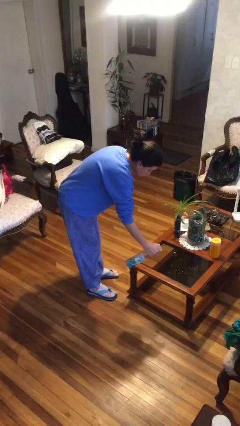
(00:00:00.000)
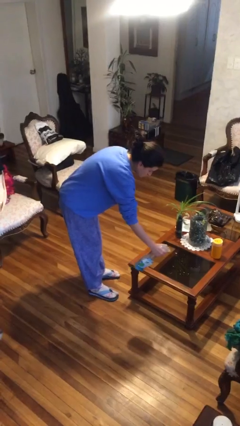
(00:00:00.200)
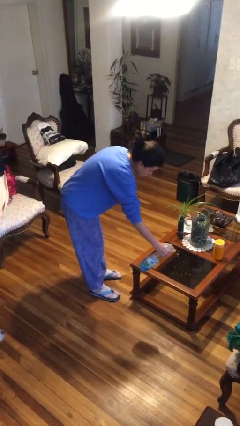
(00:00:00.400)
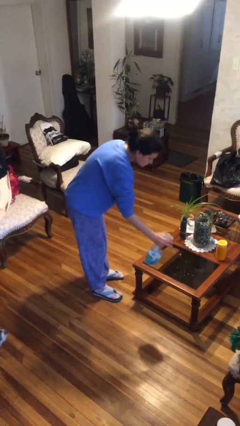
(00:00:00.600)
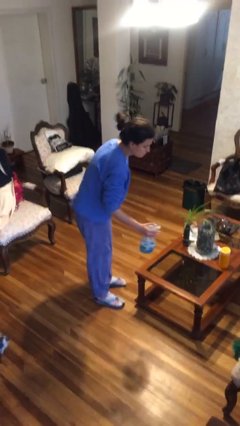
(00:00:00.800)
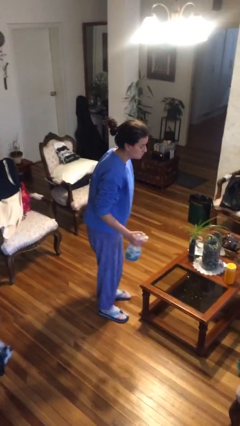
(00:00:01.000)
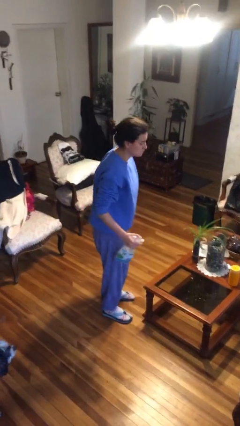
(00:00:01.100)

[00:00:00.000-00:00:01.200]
person sprays from bottle

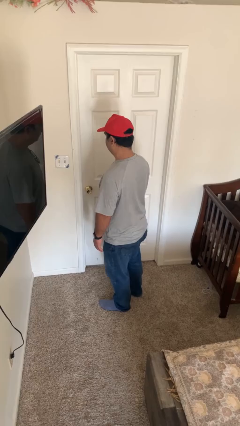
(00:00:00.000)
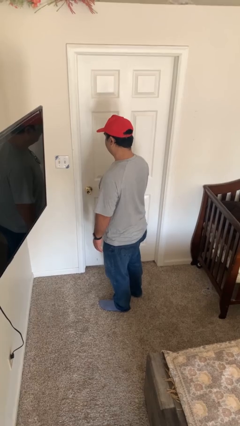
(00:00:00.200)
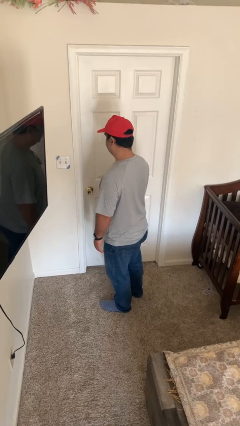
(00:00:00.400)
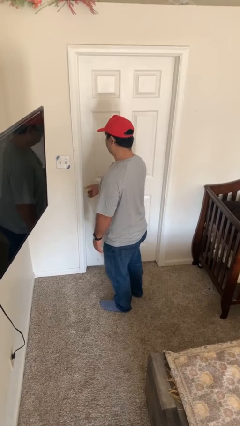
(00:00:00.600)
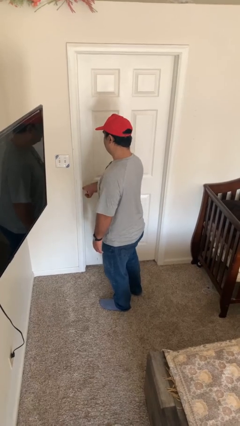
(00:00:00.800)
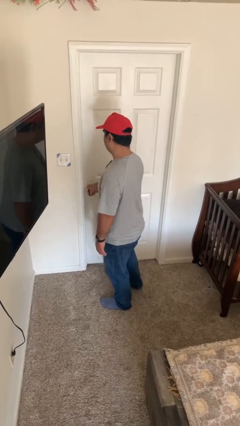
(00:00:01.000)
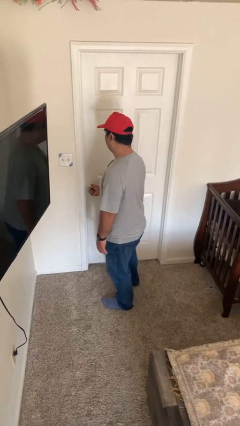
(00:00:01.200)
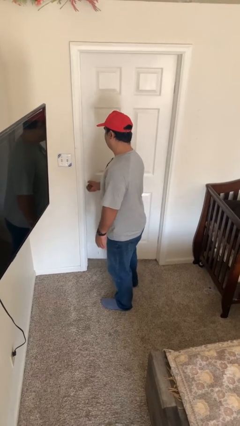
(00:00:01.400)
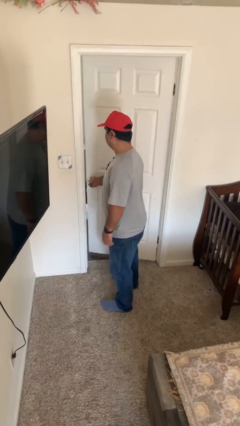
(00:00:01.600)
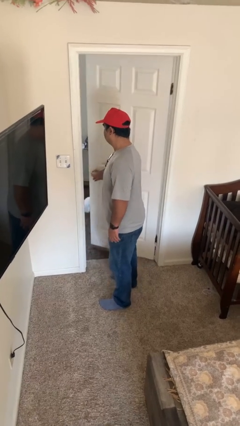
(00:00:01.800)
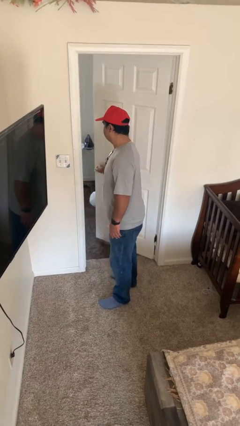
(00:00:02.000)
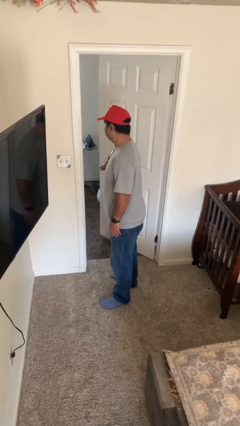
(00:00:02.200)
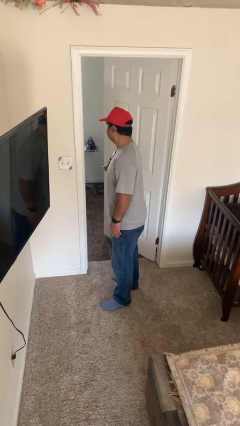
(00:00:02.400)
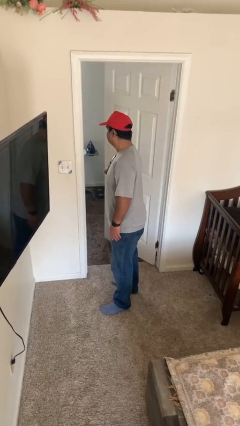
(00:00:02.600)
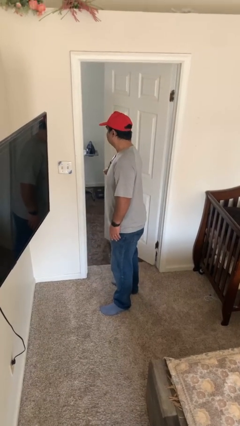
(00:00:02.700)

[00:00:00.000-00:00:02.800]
person opens facility door

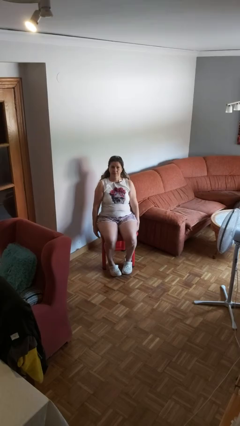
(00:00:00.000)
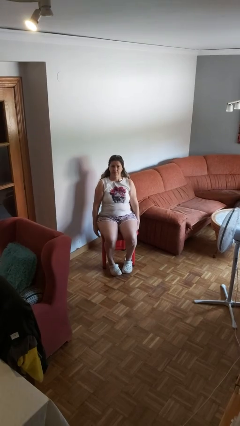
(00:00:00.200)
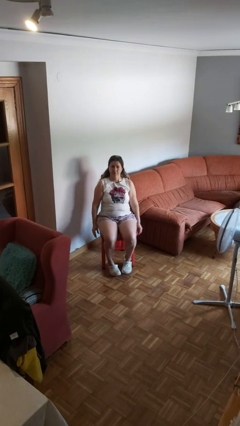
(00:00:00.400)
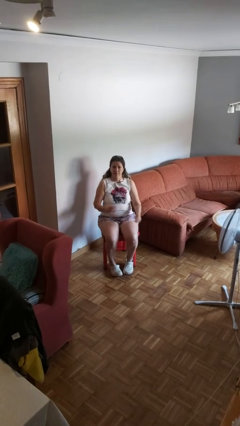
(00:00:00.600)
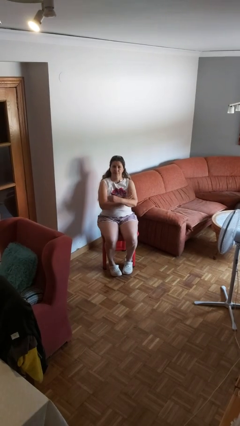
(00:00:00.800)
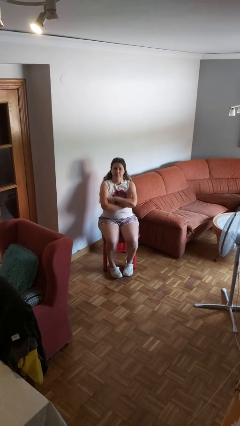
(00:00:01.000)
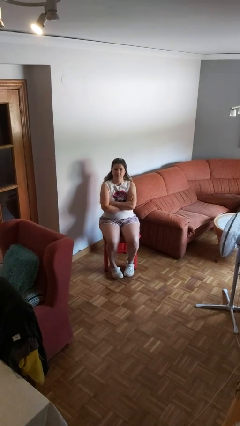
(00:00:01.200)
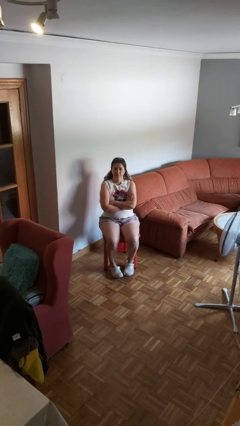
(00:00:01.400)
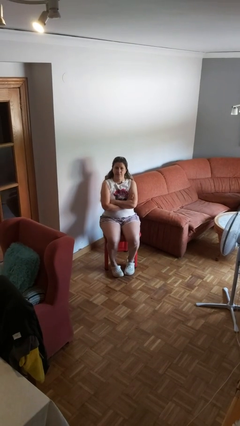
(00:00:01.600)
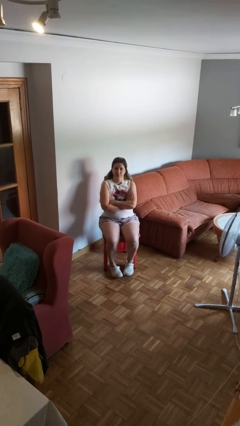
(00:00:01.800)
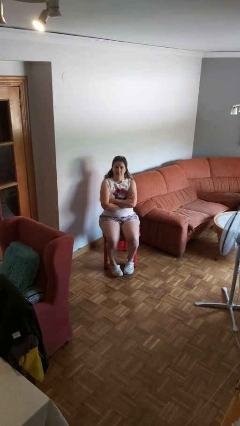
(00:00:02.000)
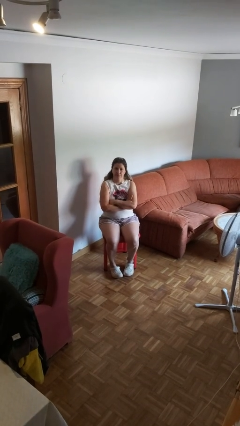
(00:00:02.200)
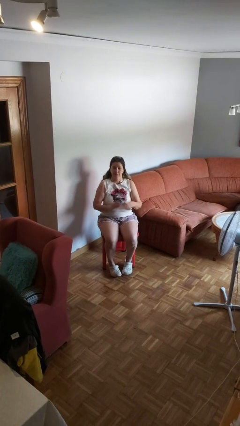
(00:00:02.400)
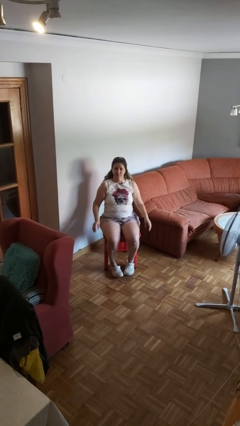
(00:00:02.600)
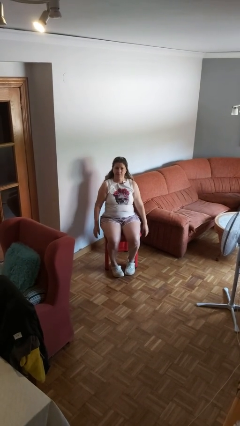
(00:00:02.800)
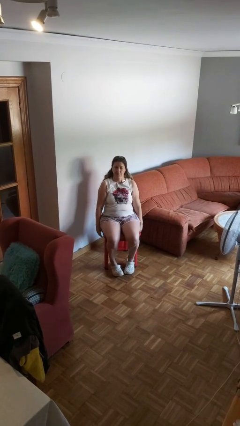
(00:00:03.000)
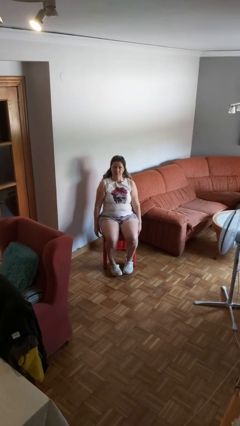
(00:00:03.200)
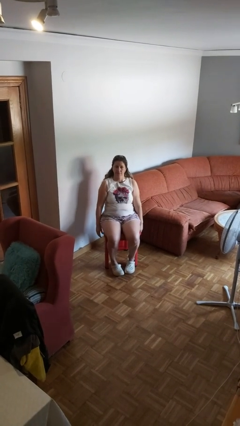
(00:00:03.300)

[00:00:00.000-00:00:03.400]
person crosses arms

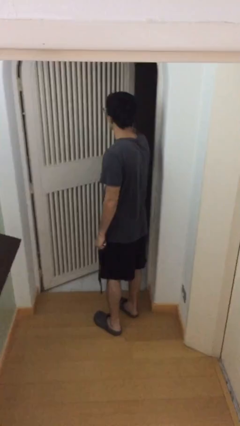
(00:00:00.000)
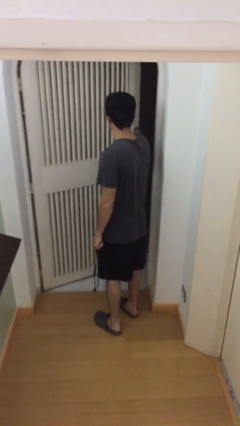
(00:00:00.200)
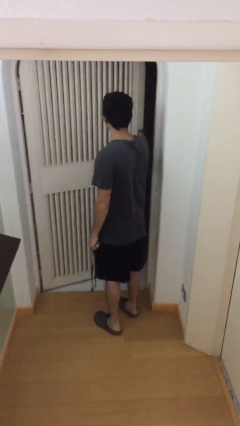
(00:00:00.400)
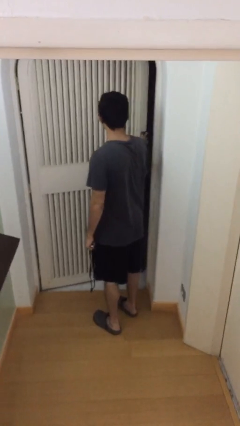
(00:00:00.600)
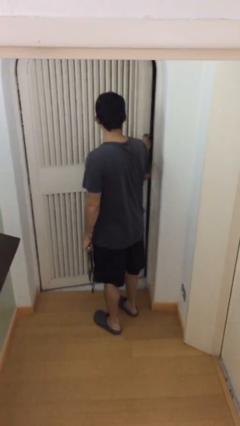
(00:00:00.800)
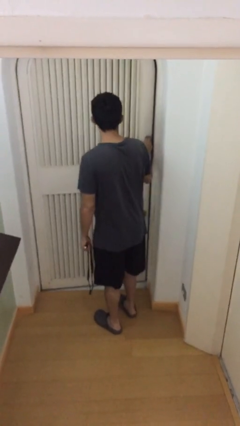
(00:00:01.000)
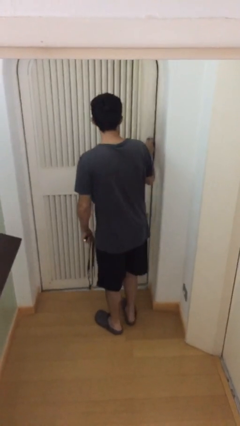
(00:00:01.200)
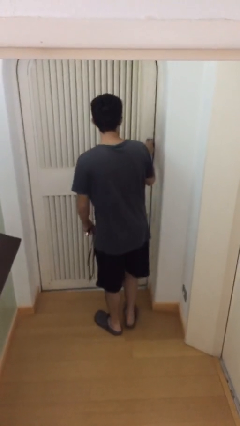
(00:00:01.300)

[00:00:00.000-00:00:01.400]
person closes facility door

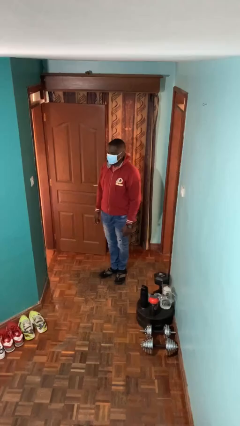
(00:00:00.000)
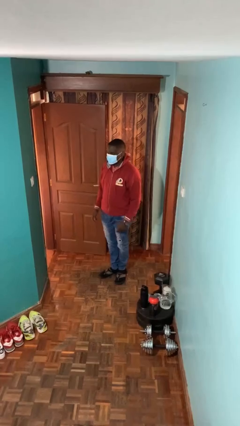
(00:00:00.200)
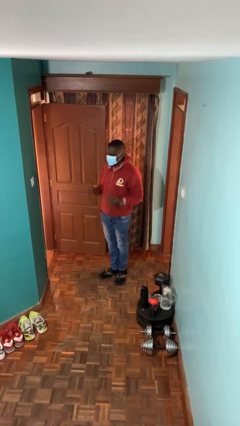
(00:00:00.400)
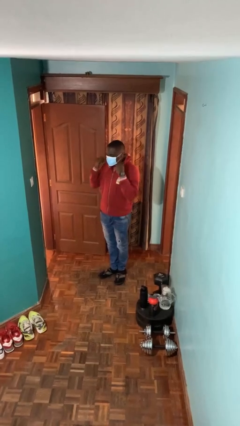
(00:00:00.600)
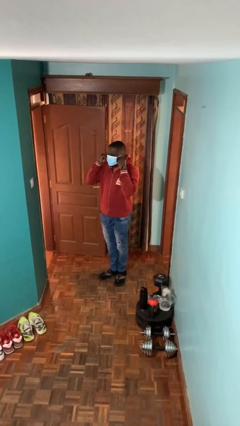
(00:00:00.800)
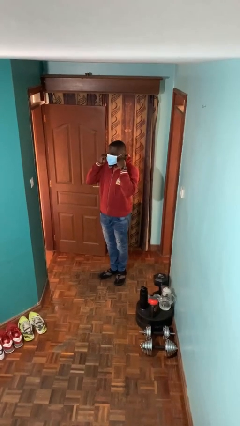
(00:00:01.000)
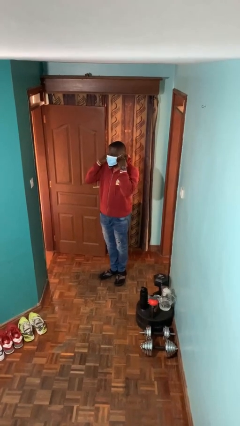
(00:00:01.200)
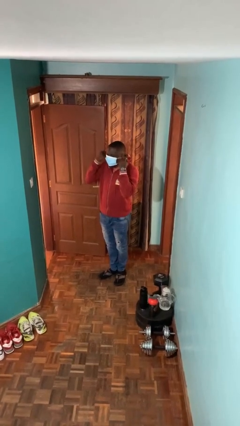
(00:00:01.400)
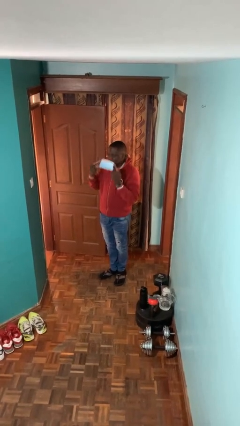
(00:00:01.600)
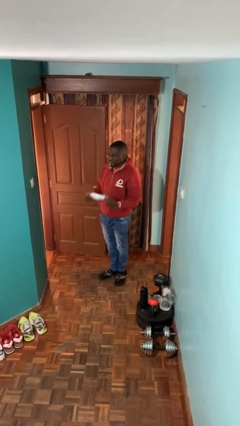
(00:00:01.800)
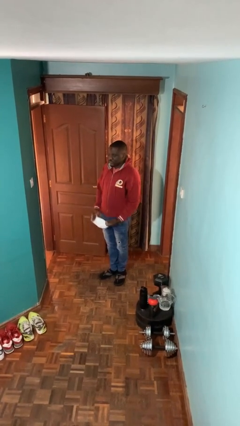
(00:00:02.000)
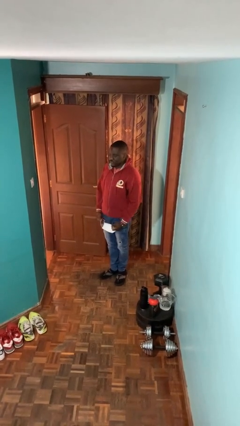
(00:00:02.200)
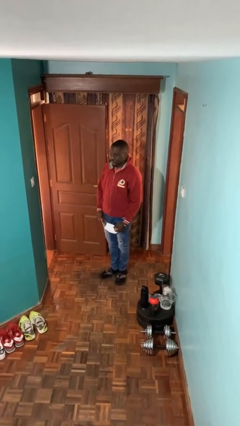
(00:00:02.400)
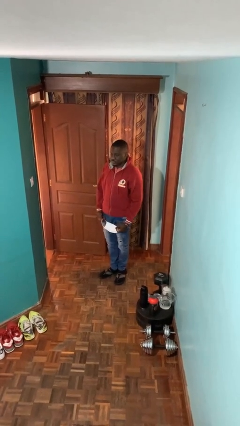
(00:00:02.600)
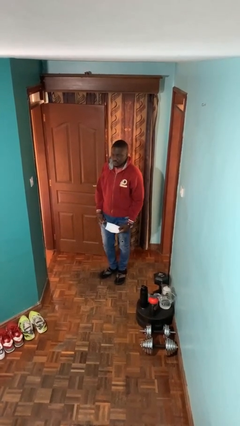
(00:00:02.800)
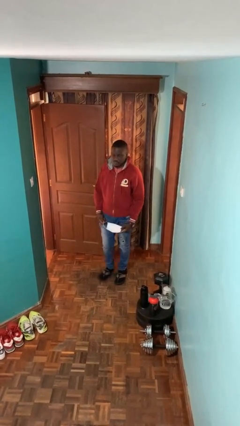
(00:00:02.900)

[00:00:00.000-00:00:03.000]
person takes off facemask

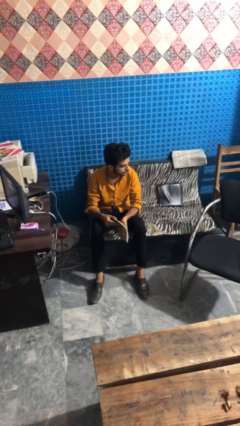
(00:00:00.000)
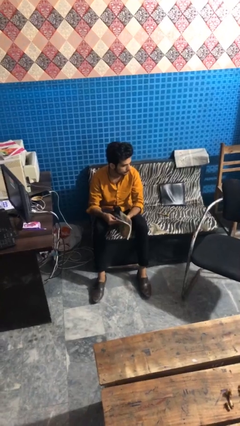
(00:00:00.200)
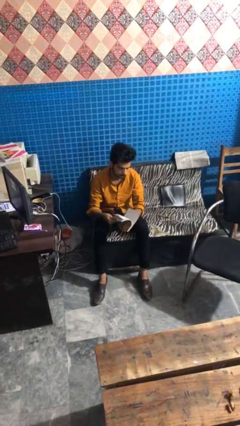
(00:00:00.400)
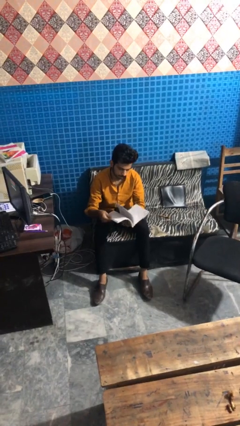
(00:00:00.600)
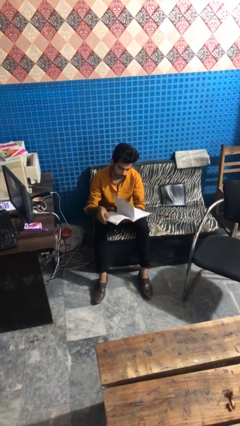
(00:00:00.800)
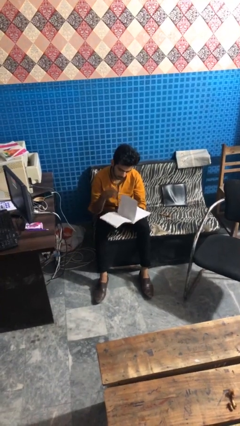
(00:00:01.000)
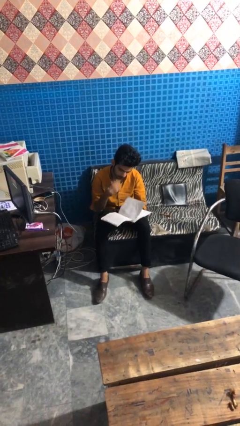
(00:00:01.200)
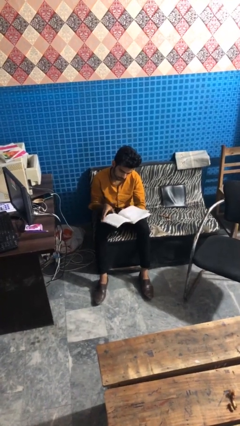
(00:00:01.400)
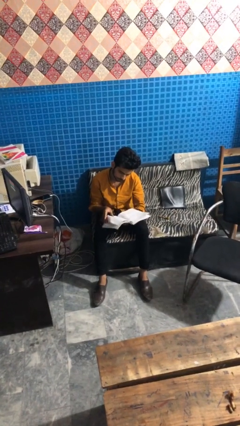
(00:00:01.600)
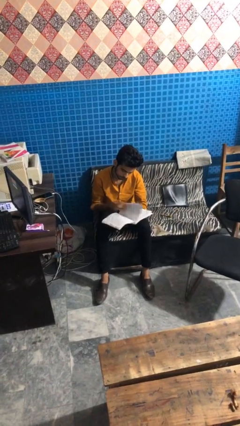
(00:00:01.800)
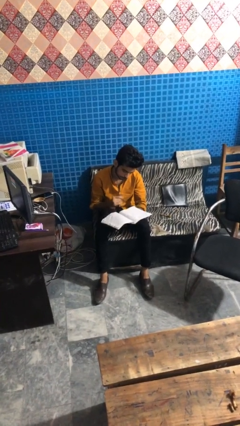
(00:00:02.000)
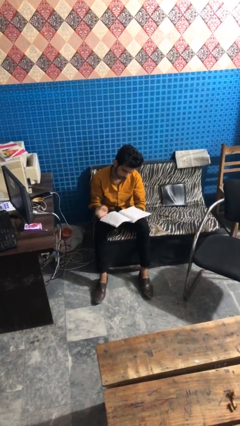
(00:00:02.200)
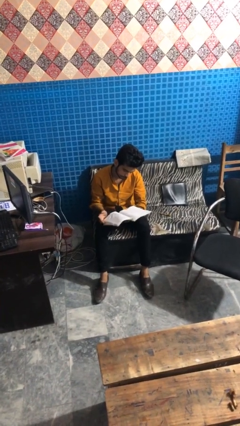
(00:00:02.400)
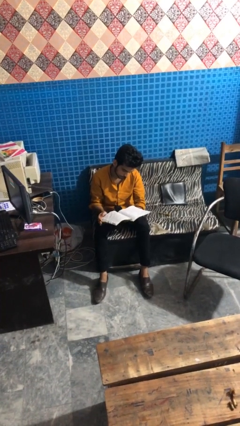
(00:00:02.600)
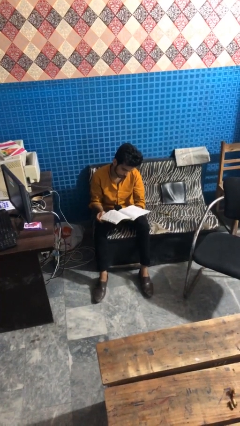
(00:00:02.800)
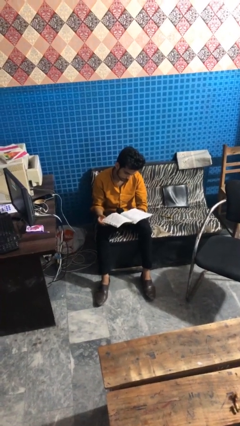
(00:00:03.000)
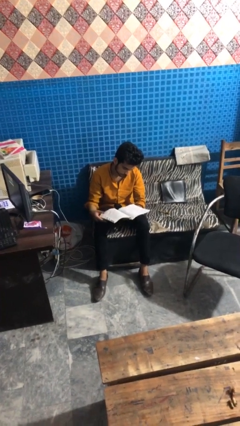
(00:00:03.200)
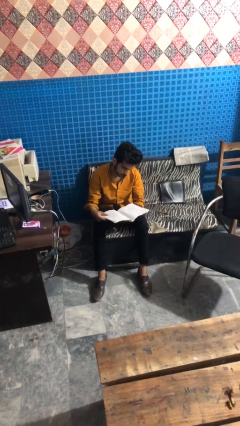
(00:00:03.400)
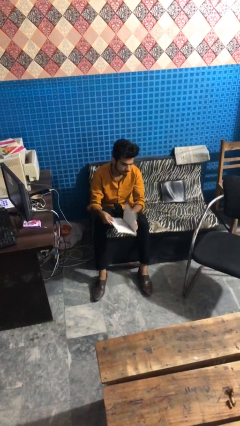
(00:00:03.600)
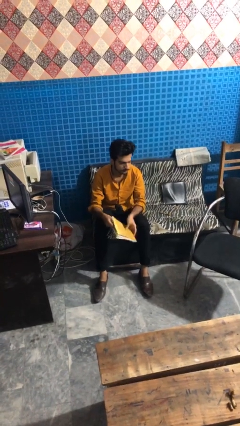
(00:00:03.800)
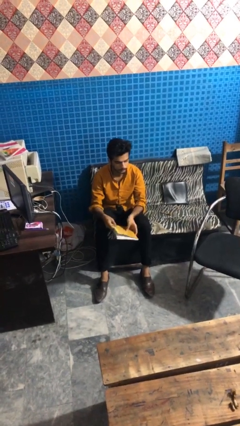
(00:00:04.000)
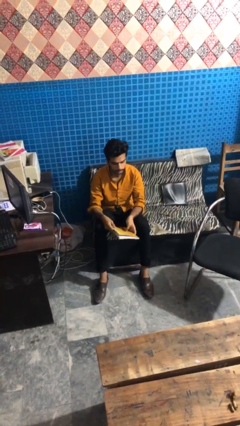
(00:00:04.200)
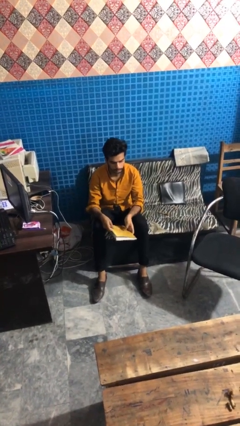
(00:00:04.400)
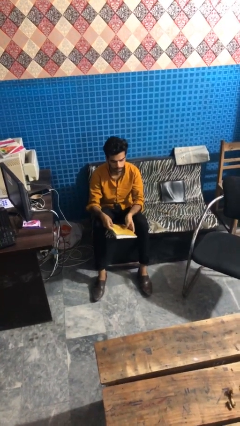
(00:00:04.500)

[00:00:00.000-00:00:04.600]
person reads magazine

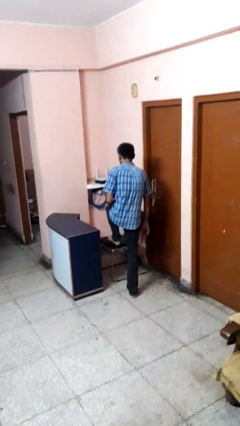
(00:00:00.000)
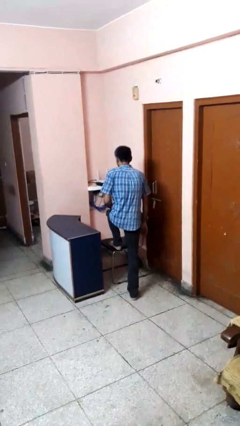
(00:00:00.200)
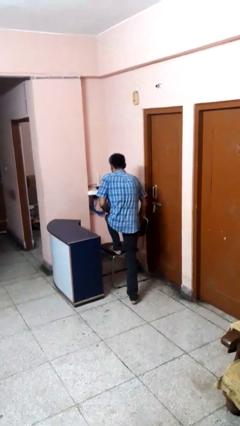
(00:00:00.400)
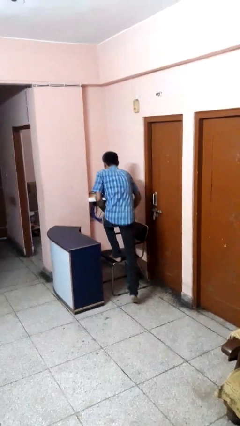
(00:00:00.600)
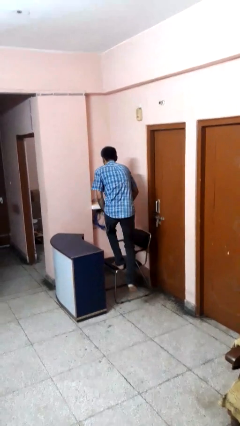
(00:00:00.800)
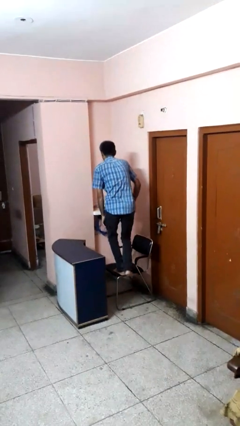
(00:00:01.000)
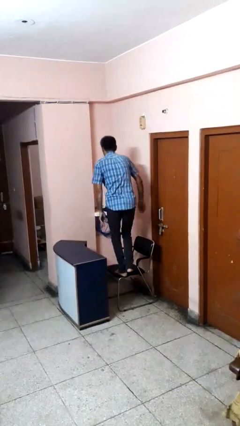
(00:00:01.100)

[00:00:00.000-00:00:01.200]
person climbs on chair
